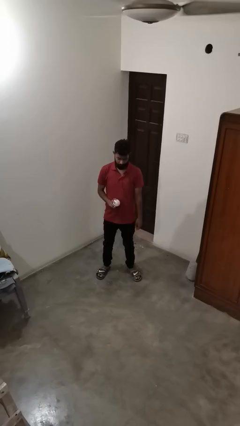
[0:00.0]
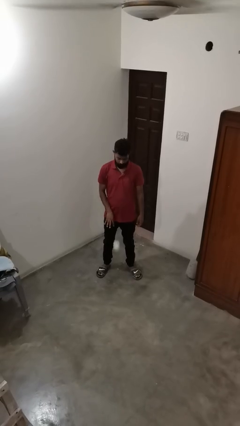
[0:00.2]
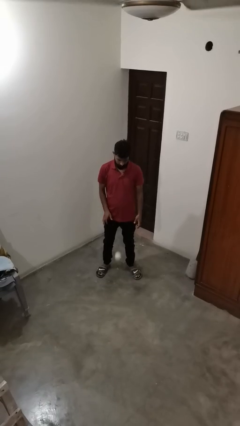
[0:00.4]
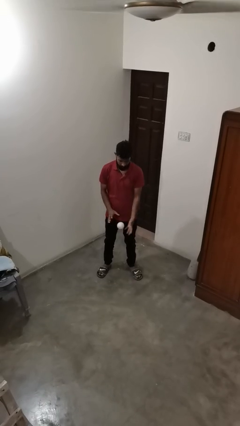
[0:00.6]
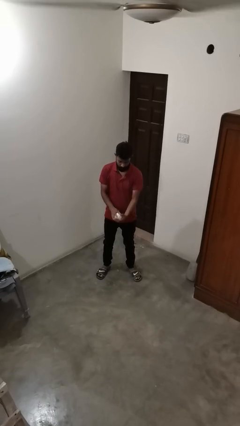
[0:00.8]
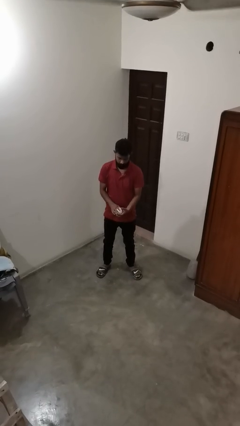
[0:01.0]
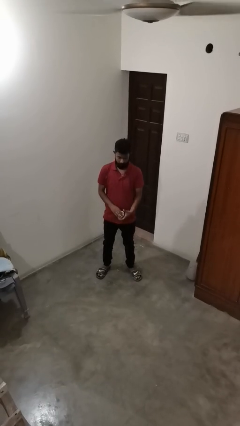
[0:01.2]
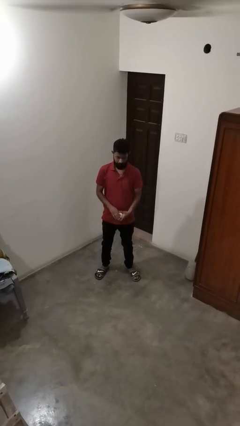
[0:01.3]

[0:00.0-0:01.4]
person bounces ball on floor

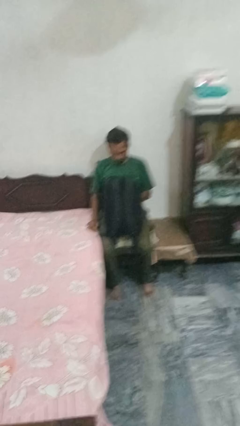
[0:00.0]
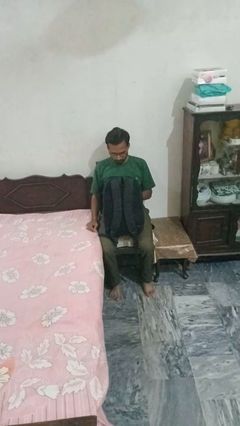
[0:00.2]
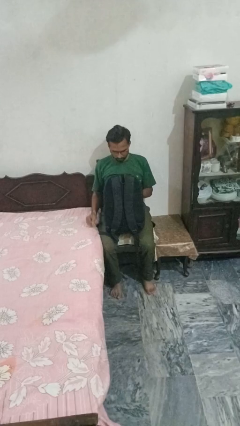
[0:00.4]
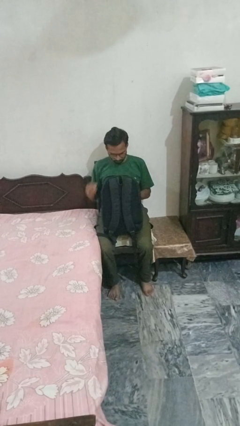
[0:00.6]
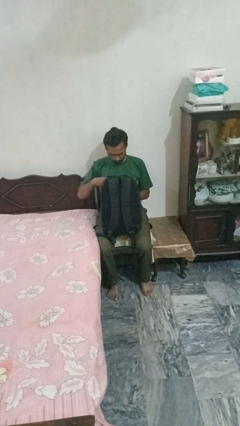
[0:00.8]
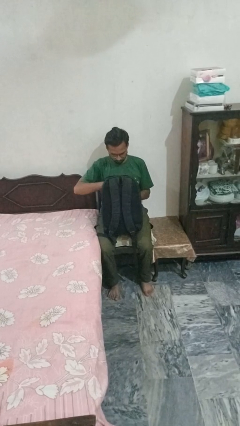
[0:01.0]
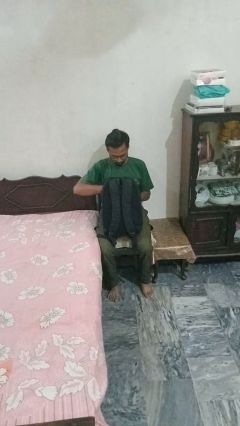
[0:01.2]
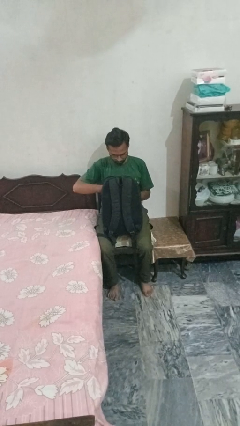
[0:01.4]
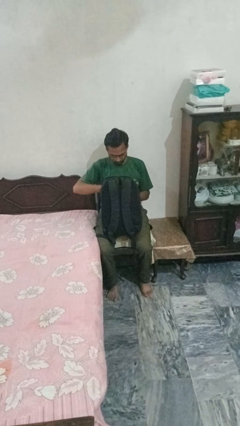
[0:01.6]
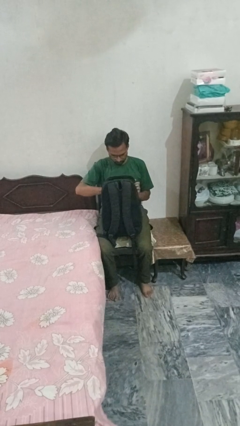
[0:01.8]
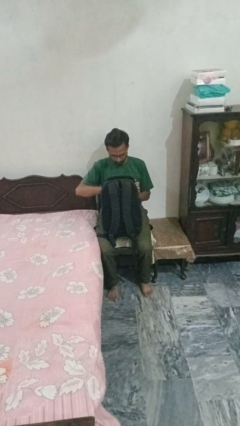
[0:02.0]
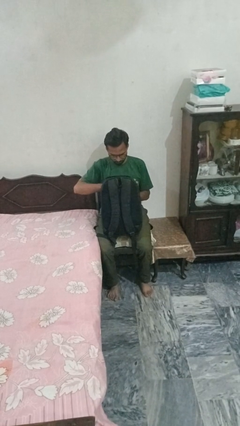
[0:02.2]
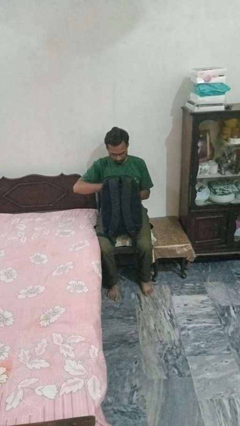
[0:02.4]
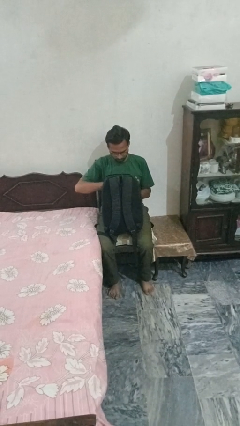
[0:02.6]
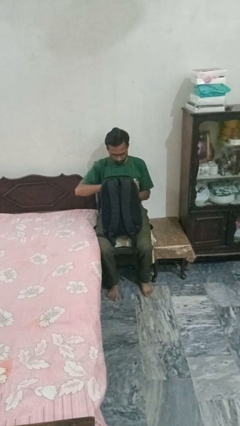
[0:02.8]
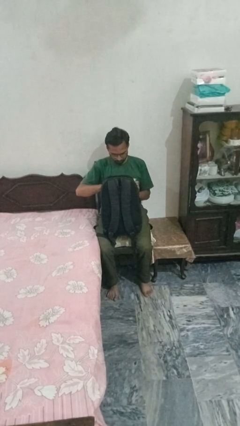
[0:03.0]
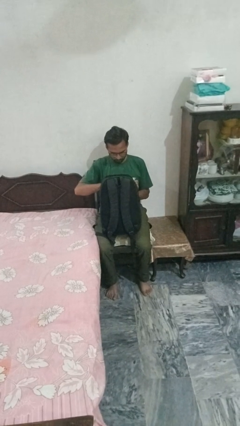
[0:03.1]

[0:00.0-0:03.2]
person searches in backpack

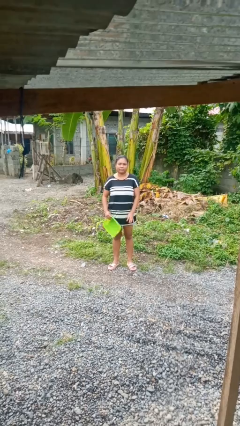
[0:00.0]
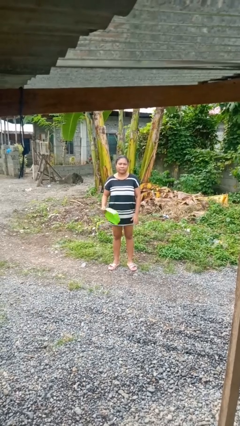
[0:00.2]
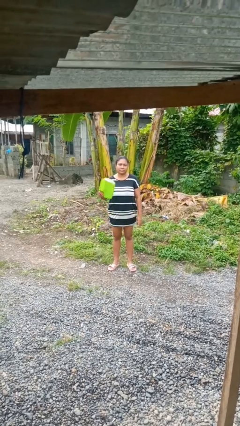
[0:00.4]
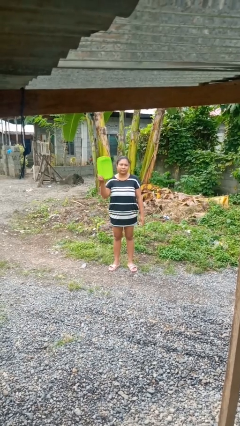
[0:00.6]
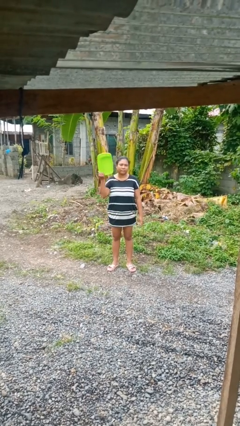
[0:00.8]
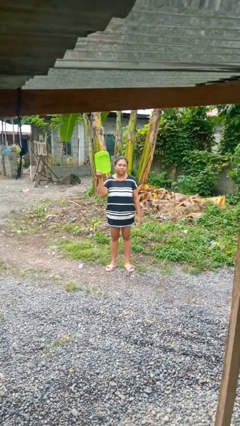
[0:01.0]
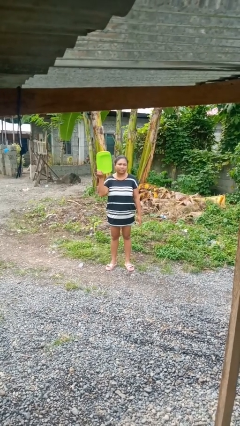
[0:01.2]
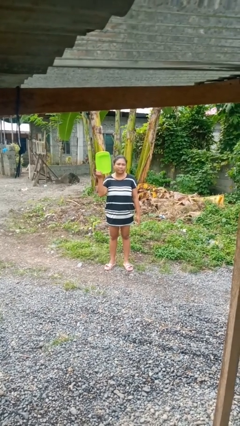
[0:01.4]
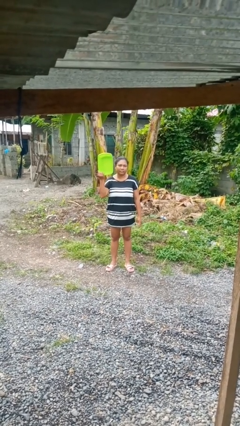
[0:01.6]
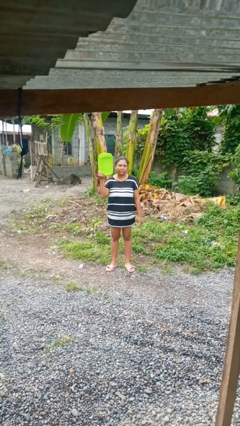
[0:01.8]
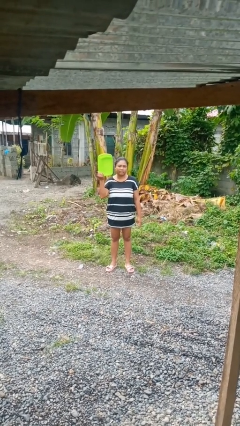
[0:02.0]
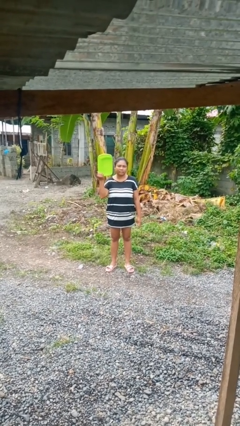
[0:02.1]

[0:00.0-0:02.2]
person holds object above head

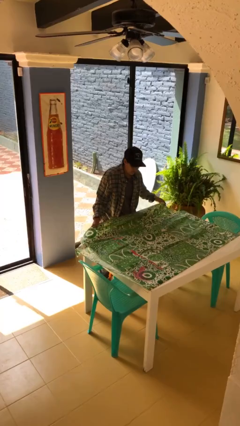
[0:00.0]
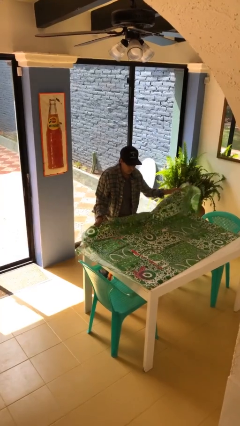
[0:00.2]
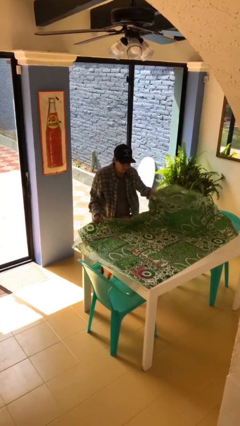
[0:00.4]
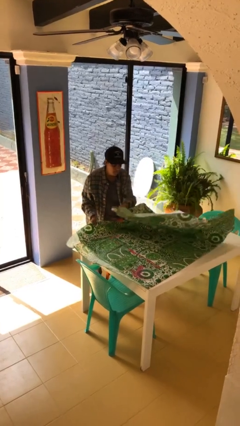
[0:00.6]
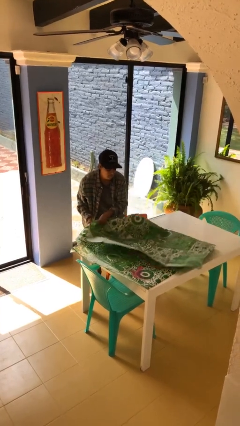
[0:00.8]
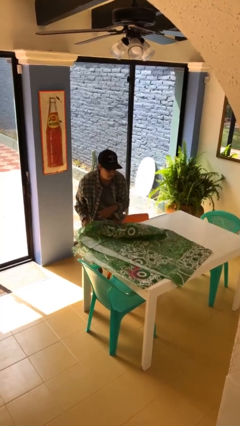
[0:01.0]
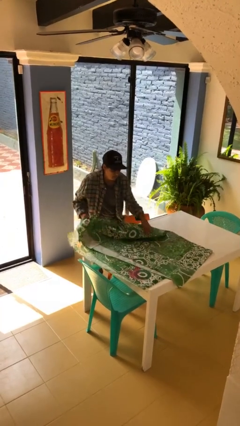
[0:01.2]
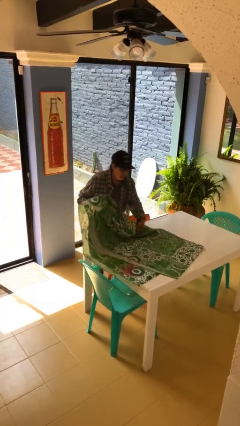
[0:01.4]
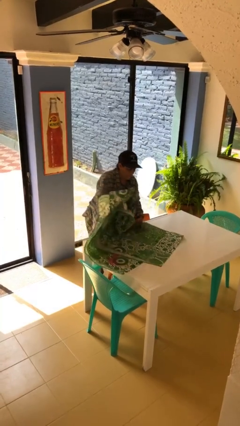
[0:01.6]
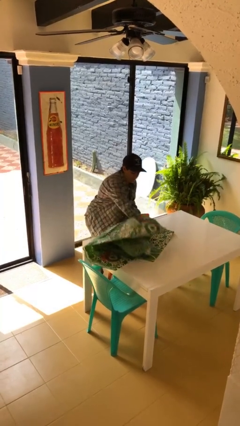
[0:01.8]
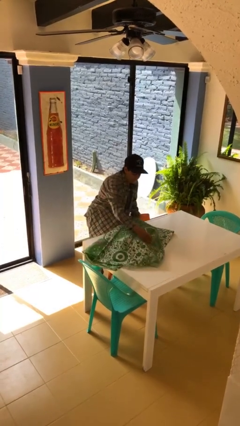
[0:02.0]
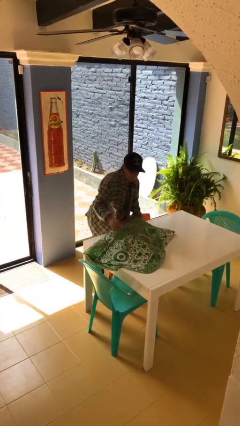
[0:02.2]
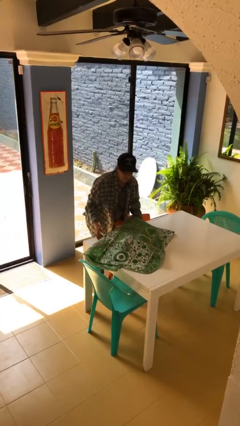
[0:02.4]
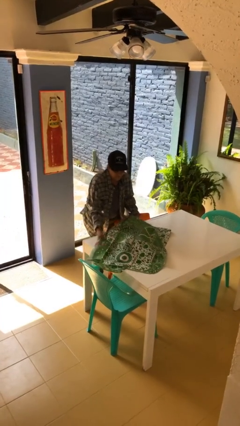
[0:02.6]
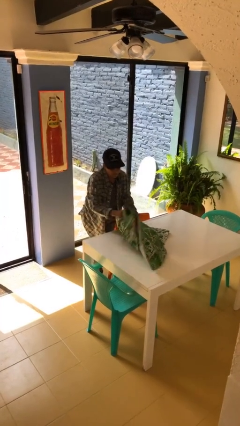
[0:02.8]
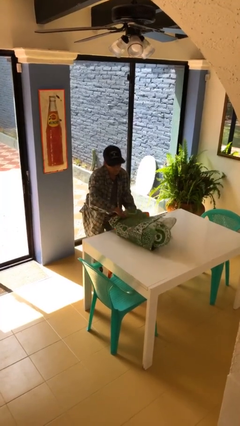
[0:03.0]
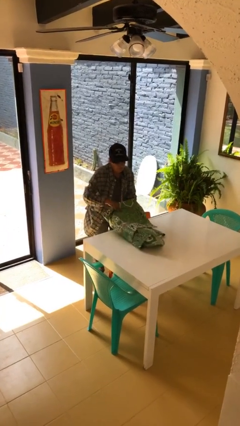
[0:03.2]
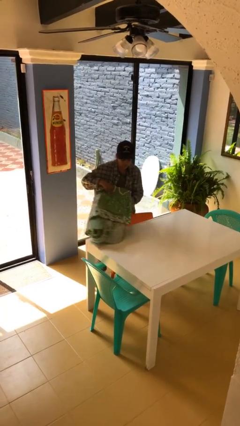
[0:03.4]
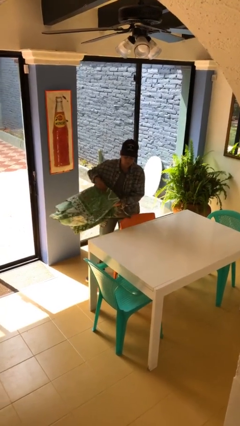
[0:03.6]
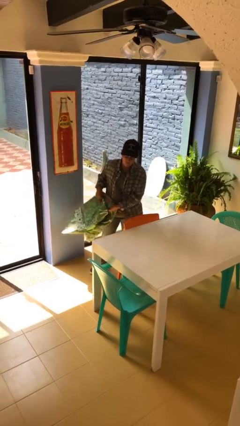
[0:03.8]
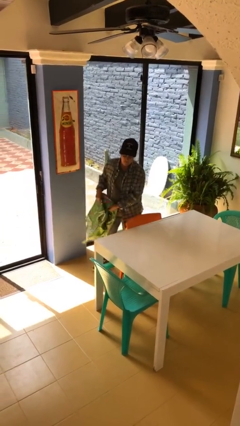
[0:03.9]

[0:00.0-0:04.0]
person folds tablecloth

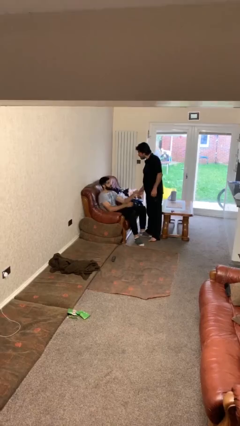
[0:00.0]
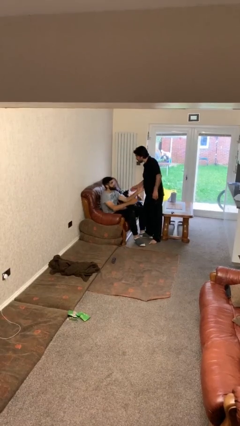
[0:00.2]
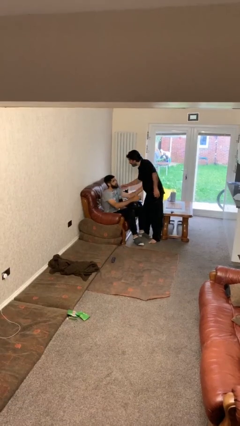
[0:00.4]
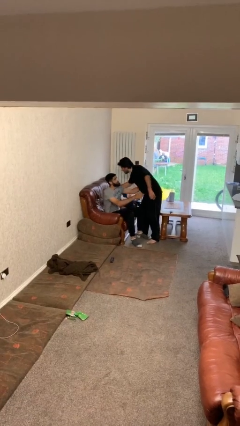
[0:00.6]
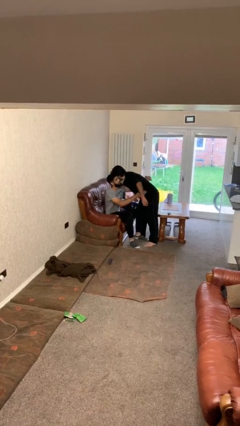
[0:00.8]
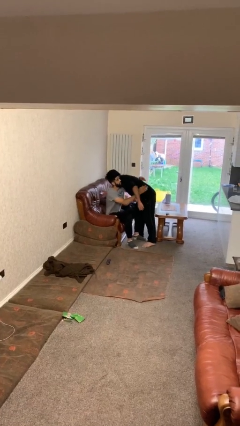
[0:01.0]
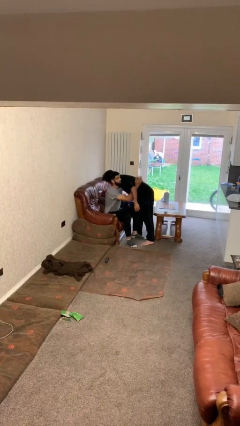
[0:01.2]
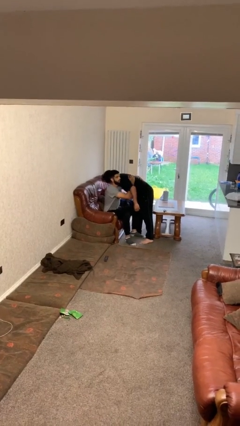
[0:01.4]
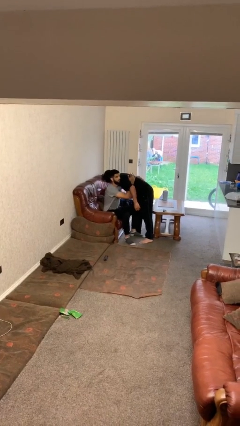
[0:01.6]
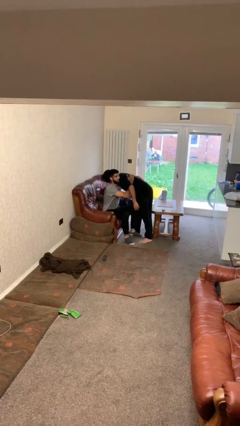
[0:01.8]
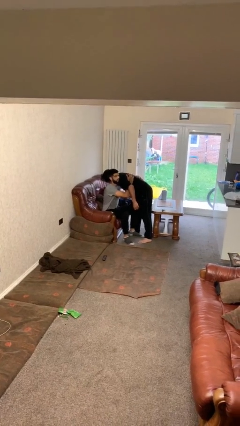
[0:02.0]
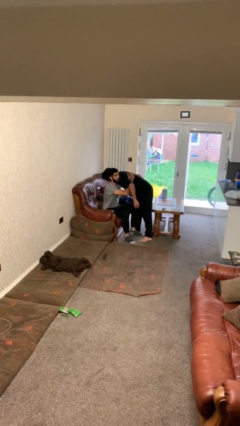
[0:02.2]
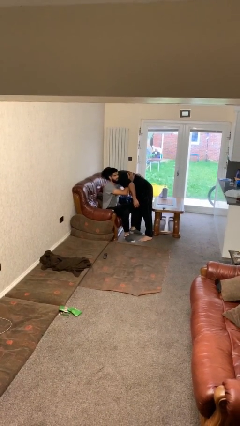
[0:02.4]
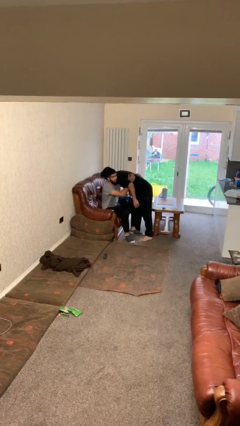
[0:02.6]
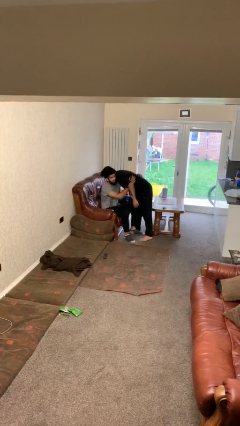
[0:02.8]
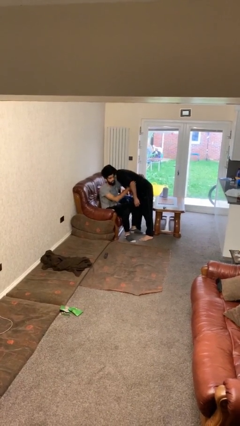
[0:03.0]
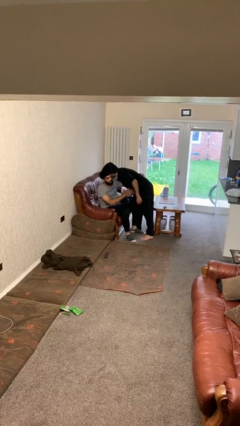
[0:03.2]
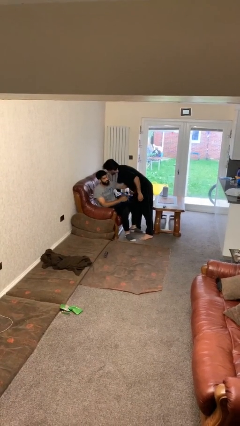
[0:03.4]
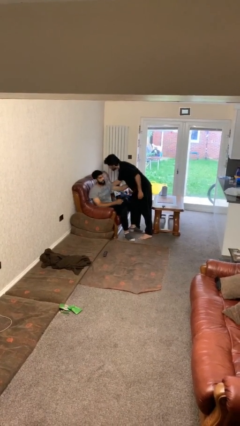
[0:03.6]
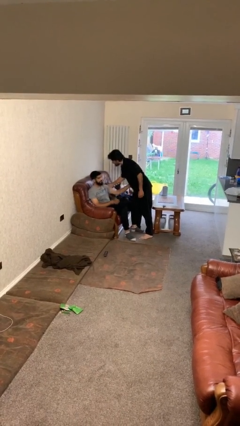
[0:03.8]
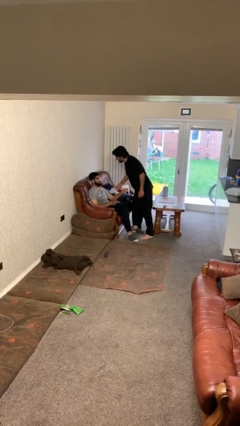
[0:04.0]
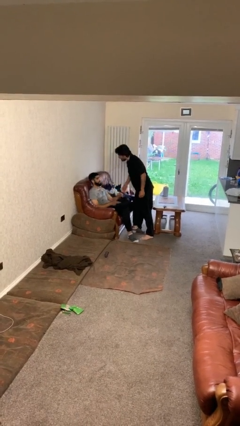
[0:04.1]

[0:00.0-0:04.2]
person embraces person

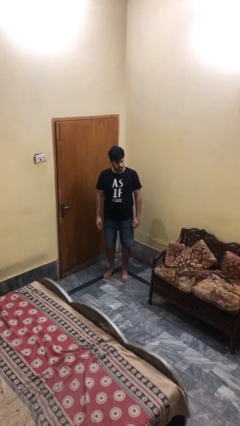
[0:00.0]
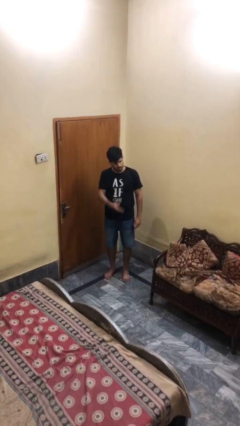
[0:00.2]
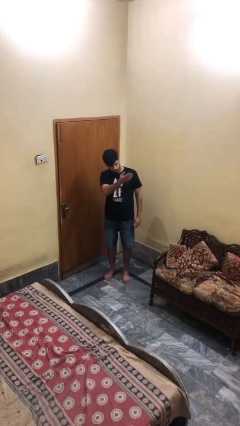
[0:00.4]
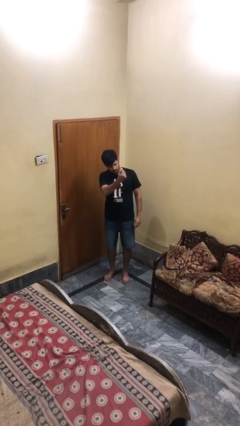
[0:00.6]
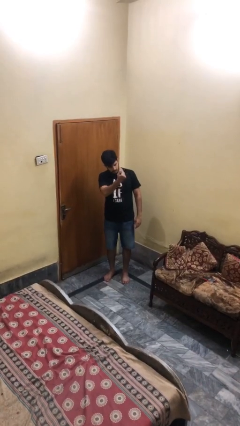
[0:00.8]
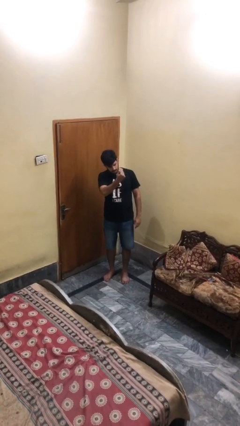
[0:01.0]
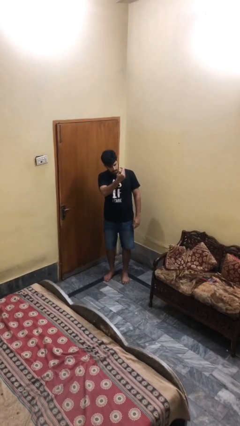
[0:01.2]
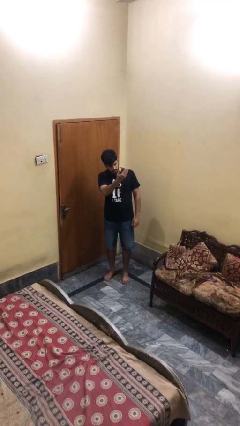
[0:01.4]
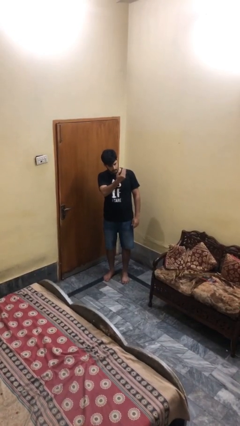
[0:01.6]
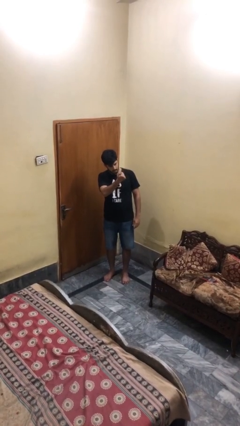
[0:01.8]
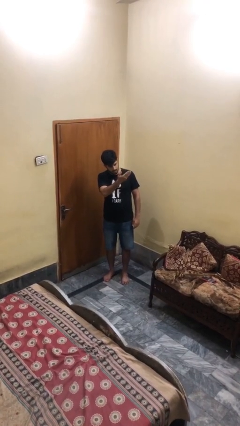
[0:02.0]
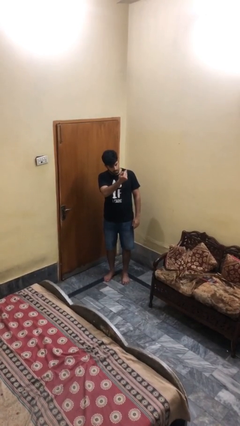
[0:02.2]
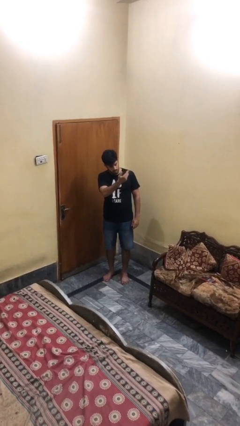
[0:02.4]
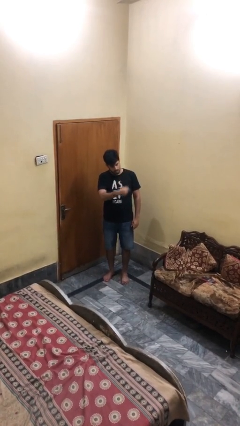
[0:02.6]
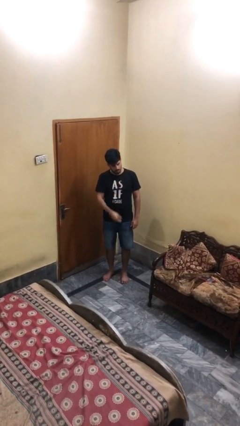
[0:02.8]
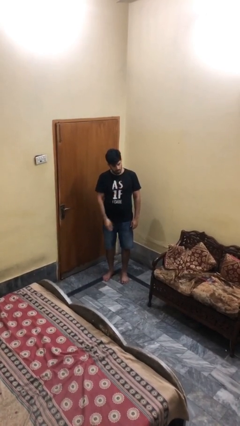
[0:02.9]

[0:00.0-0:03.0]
person gestures come here
